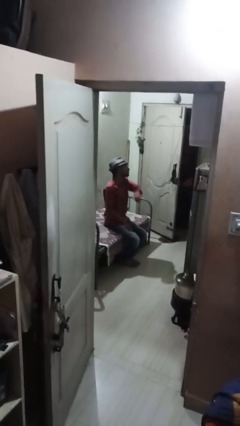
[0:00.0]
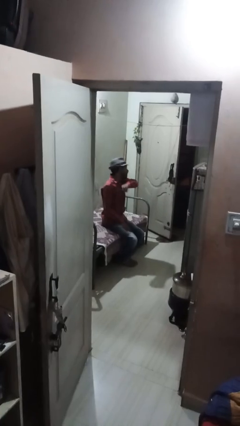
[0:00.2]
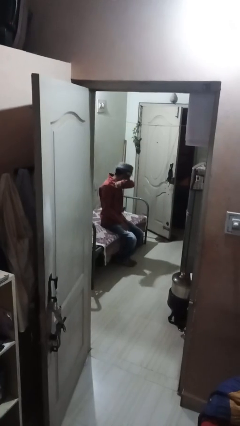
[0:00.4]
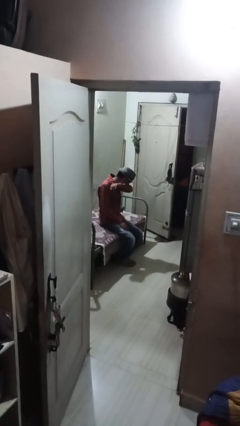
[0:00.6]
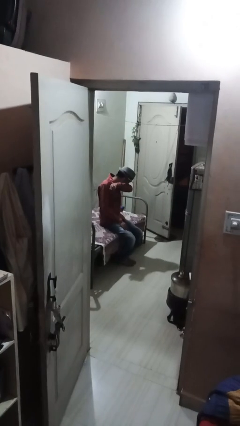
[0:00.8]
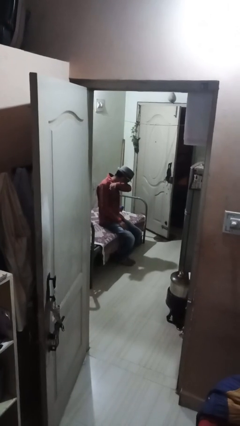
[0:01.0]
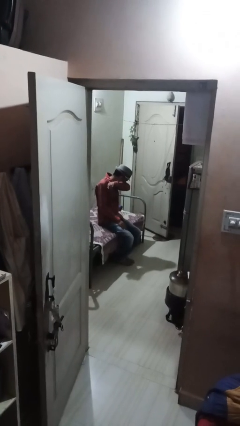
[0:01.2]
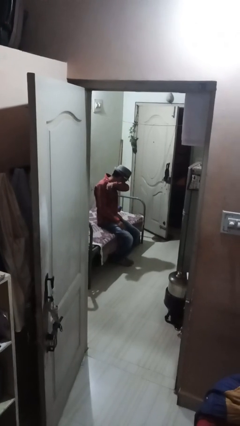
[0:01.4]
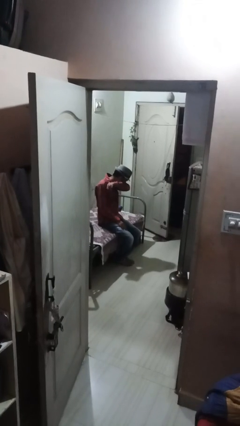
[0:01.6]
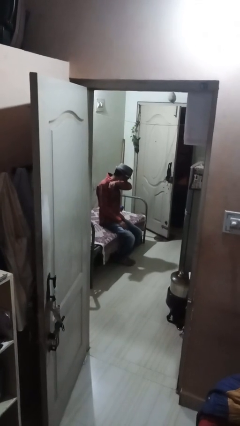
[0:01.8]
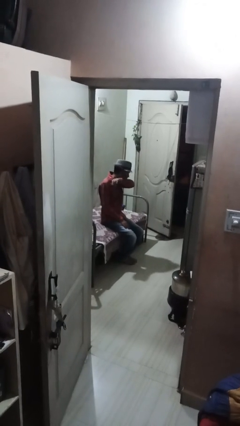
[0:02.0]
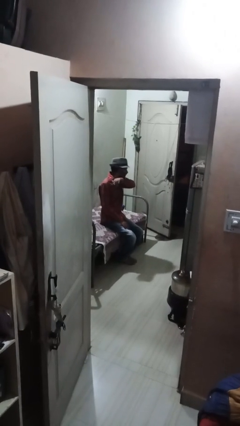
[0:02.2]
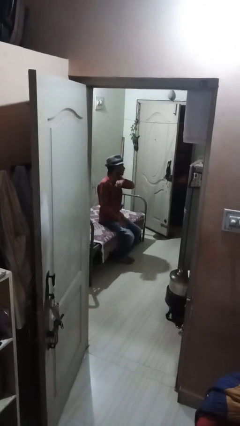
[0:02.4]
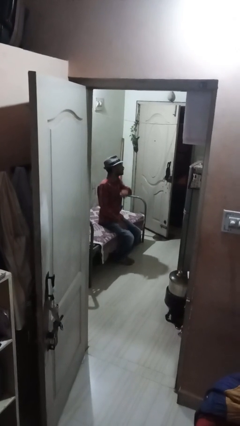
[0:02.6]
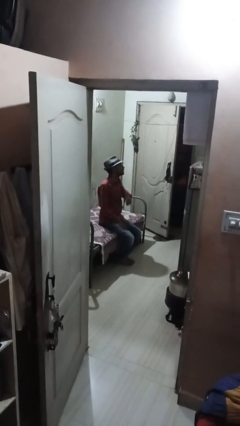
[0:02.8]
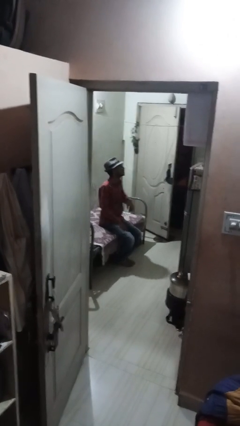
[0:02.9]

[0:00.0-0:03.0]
person sneezes into arm

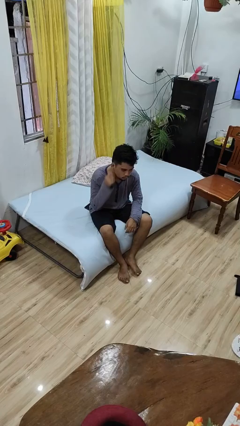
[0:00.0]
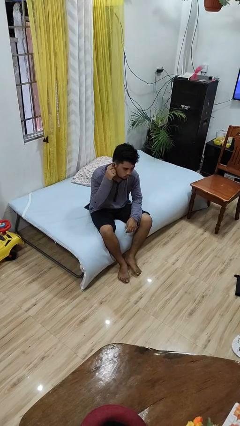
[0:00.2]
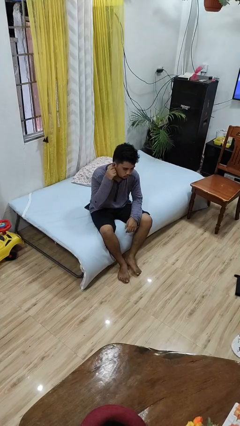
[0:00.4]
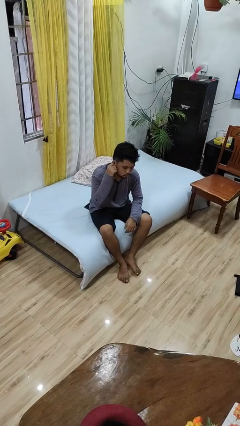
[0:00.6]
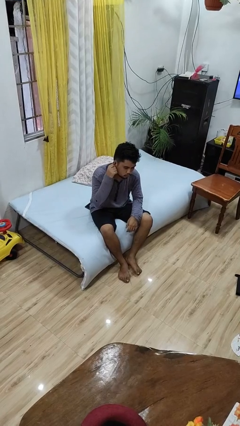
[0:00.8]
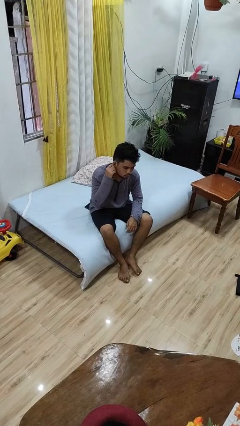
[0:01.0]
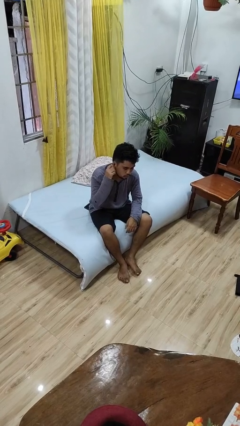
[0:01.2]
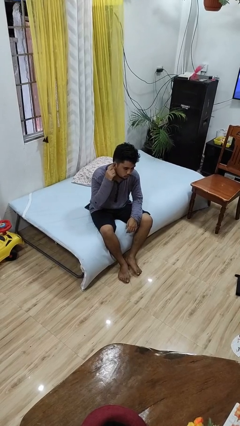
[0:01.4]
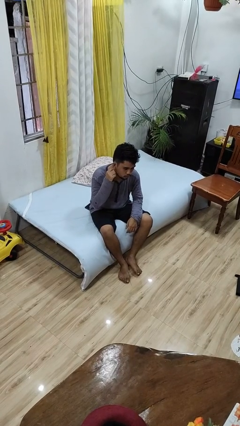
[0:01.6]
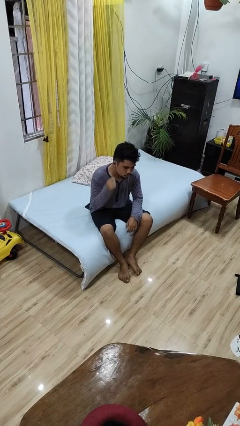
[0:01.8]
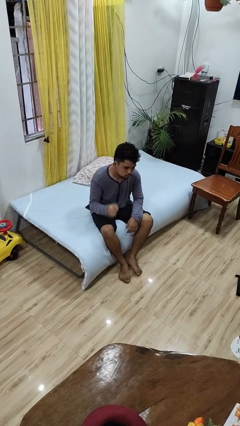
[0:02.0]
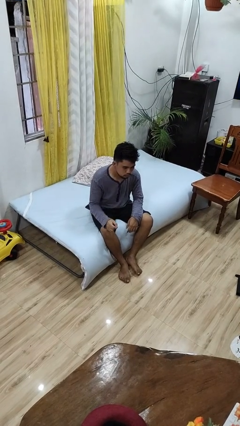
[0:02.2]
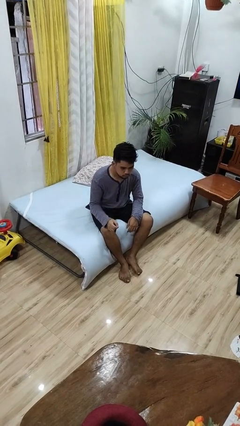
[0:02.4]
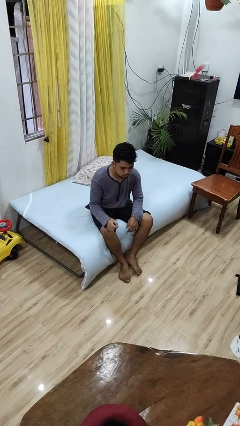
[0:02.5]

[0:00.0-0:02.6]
person touches earlobe

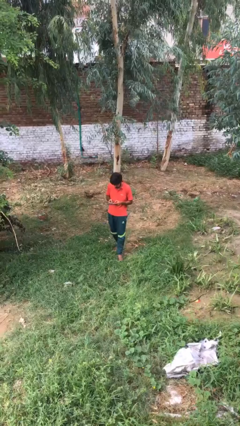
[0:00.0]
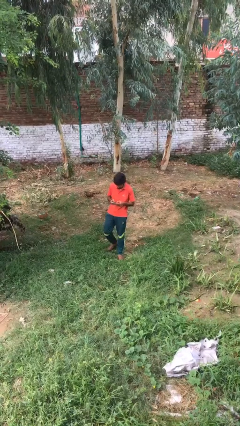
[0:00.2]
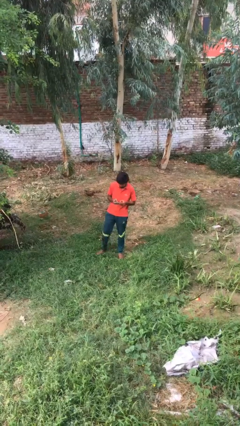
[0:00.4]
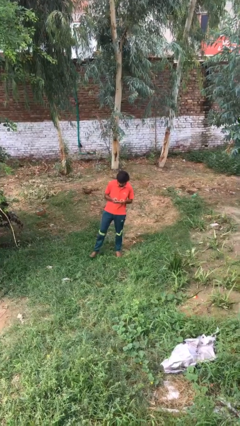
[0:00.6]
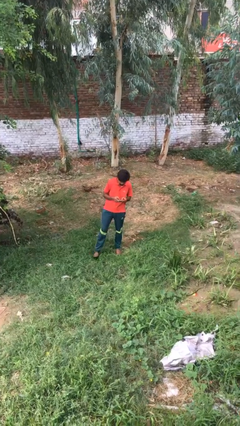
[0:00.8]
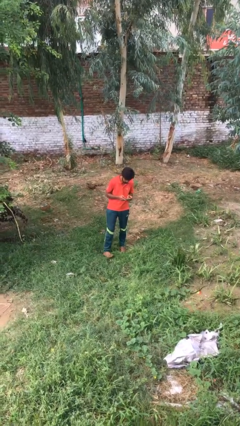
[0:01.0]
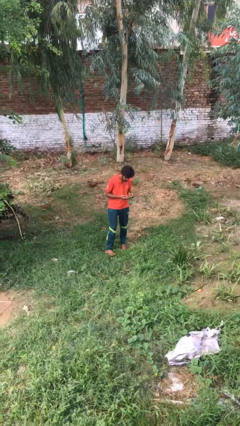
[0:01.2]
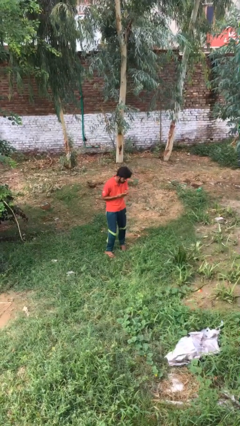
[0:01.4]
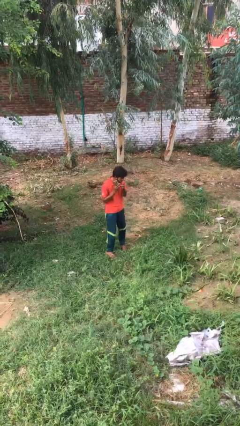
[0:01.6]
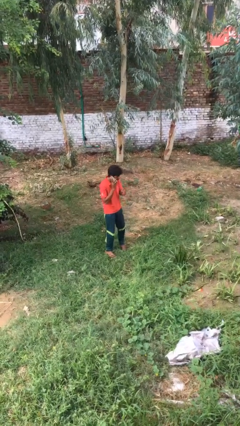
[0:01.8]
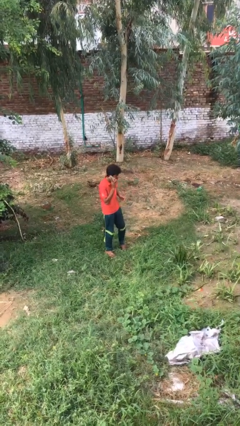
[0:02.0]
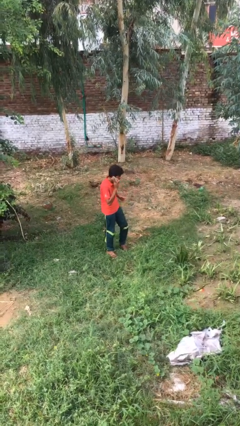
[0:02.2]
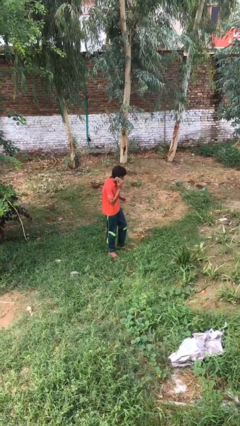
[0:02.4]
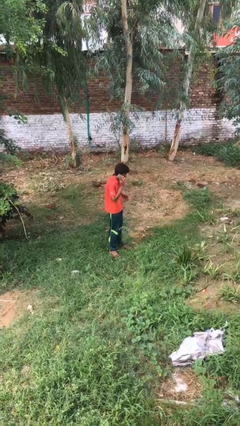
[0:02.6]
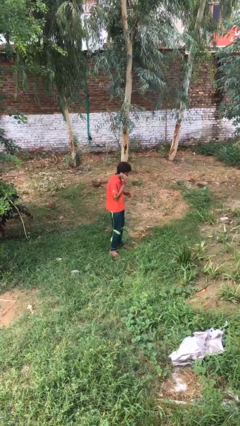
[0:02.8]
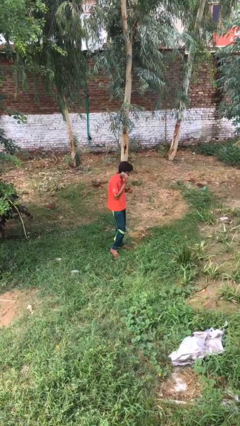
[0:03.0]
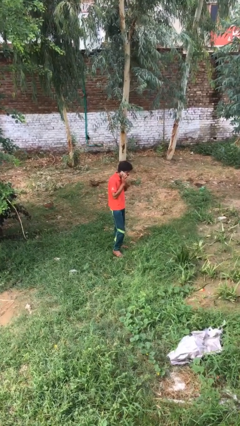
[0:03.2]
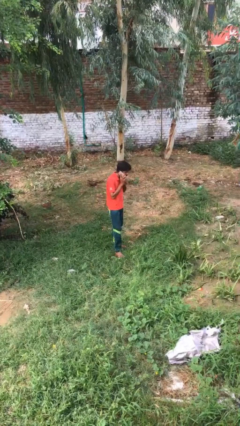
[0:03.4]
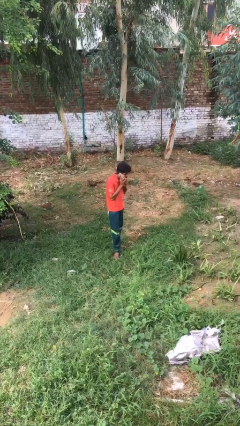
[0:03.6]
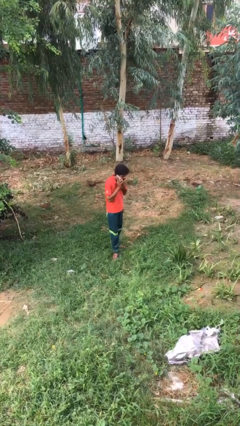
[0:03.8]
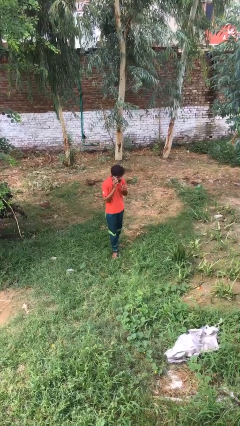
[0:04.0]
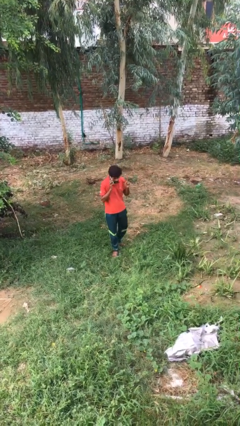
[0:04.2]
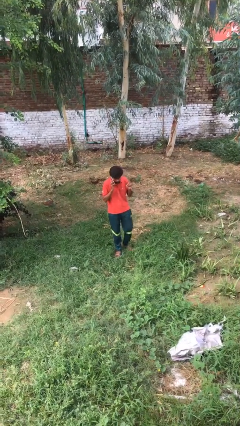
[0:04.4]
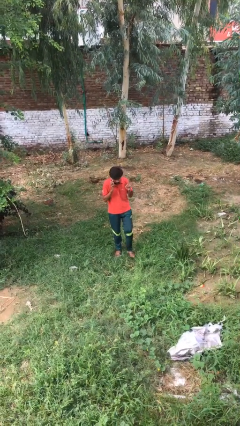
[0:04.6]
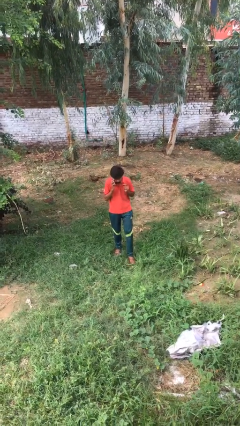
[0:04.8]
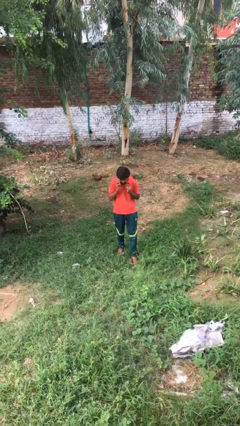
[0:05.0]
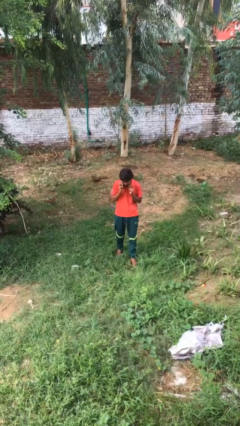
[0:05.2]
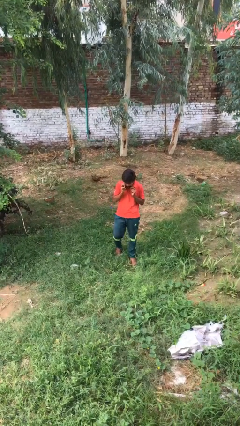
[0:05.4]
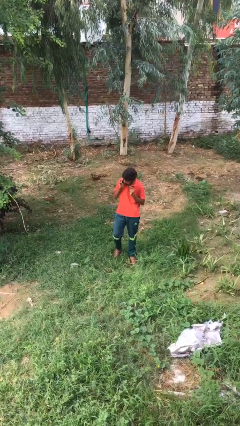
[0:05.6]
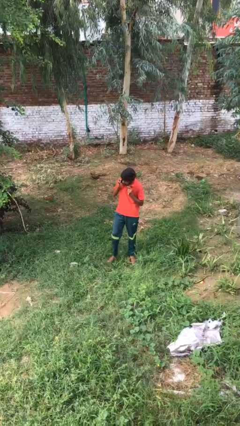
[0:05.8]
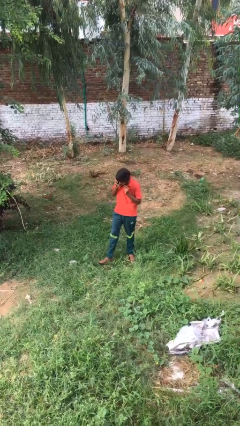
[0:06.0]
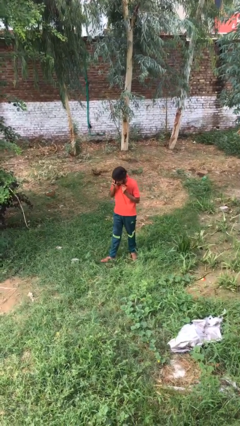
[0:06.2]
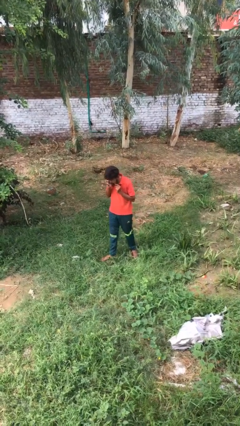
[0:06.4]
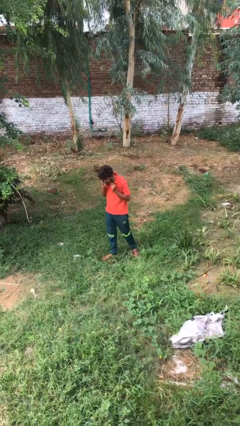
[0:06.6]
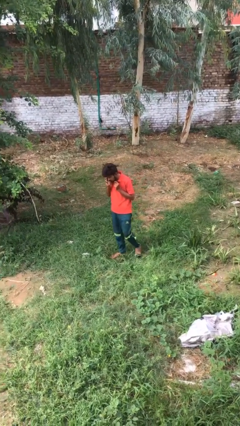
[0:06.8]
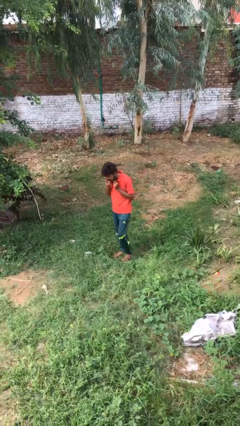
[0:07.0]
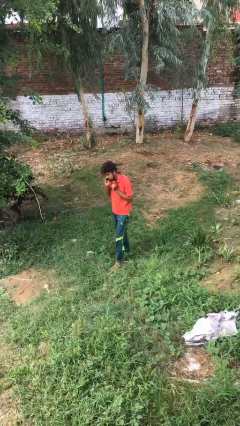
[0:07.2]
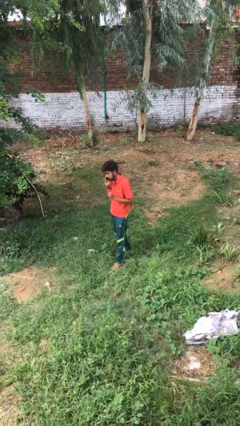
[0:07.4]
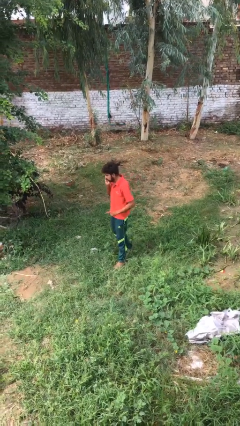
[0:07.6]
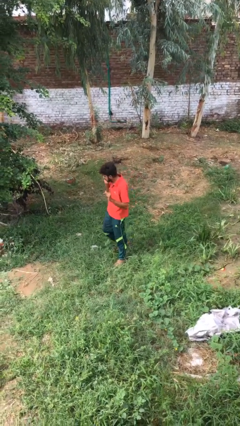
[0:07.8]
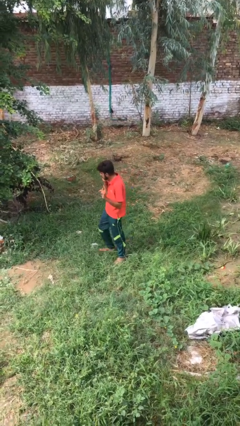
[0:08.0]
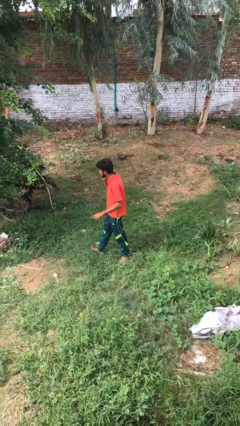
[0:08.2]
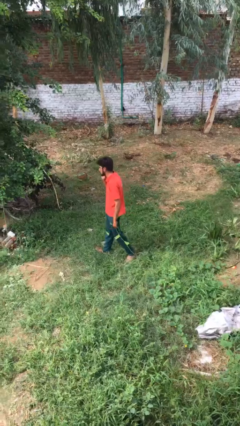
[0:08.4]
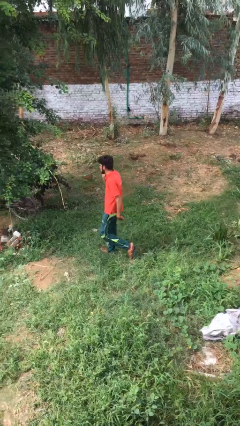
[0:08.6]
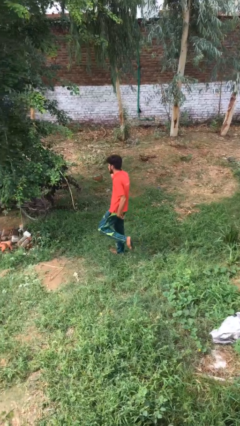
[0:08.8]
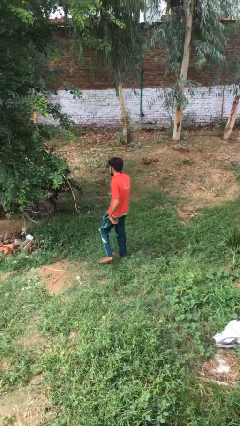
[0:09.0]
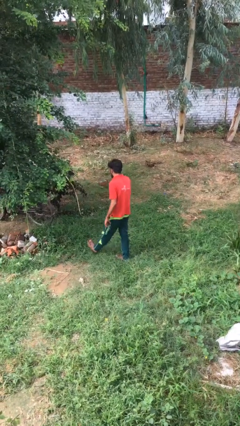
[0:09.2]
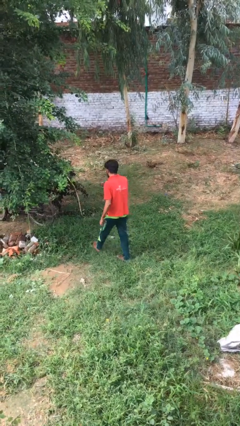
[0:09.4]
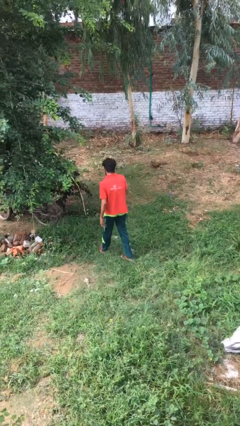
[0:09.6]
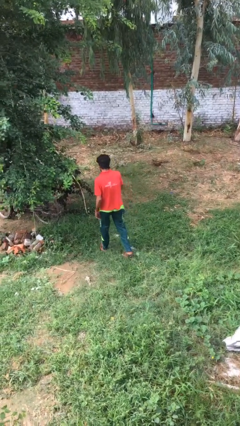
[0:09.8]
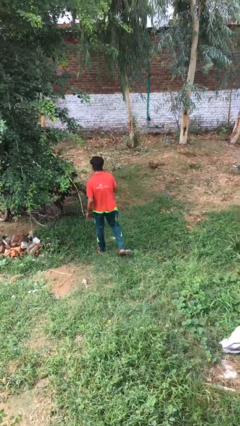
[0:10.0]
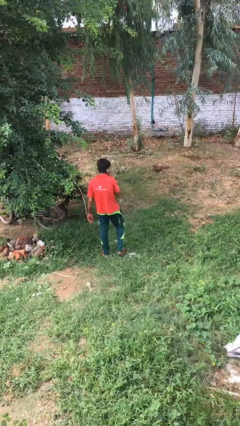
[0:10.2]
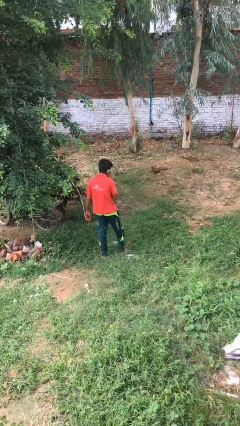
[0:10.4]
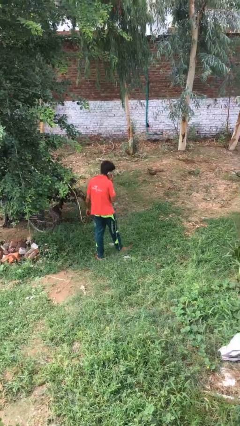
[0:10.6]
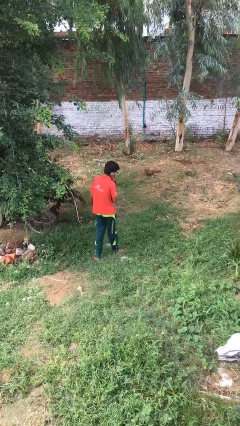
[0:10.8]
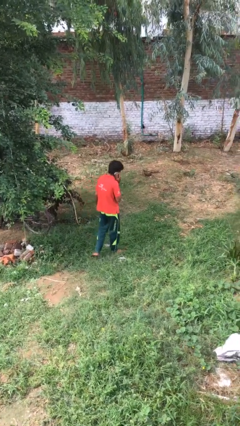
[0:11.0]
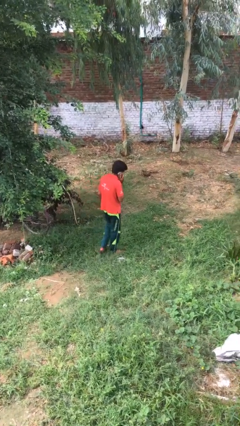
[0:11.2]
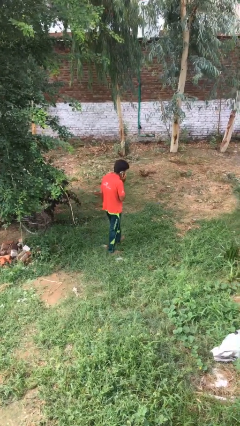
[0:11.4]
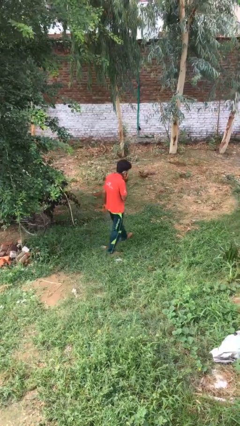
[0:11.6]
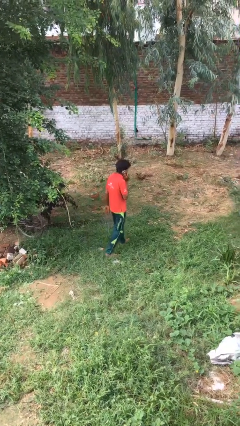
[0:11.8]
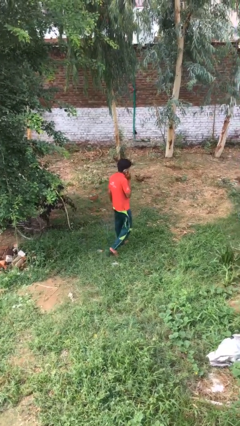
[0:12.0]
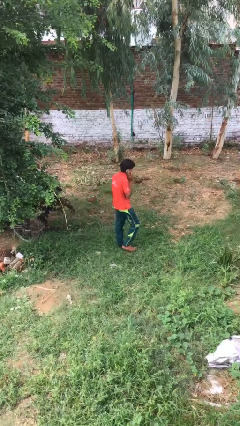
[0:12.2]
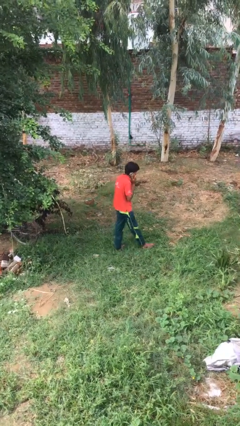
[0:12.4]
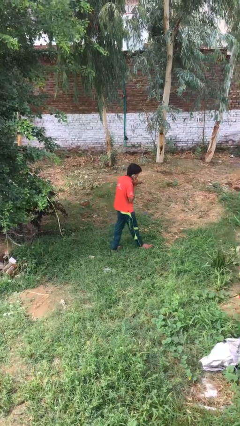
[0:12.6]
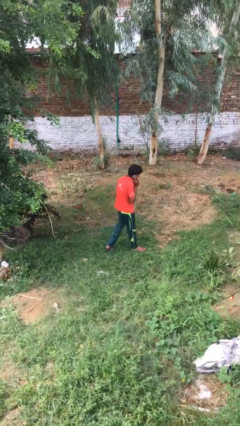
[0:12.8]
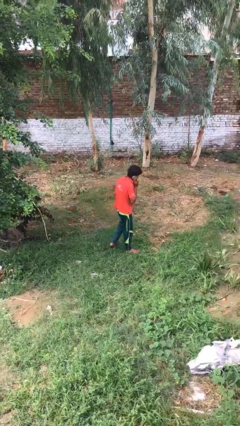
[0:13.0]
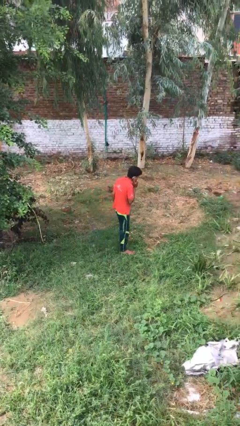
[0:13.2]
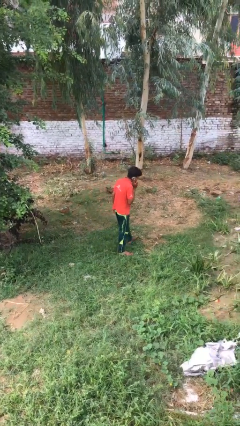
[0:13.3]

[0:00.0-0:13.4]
person talks on phone
